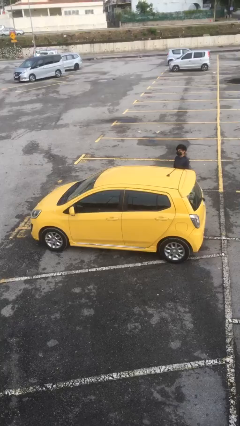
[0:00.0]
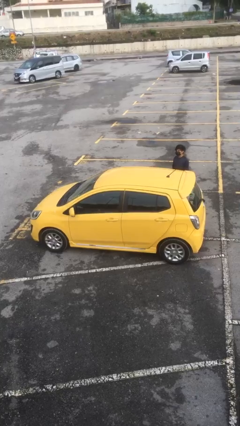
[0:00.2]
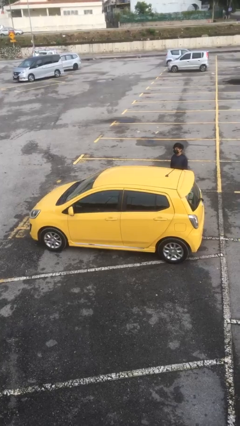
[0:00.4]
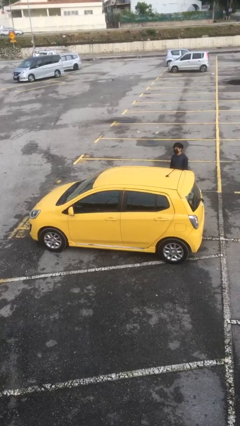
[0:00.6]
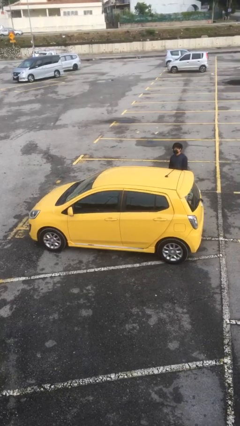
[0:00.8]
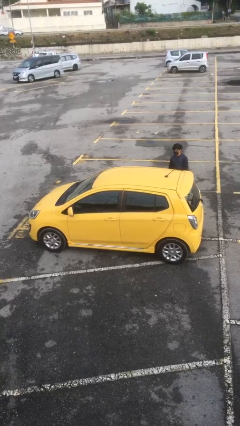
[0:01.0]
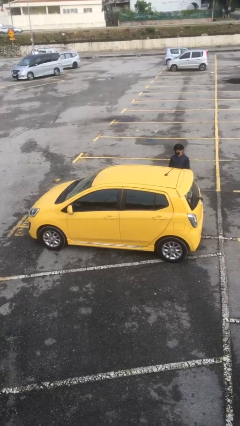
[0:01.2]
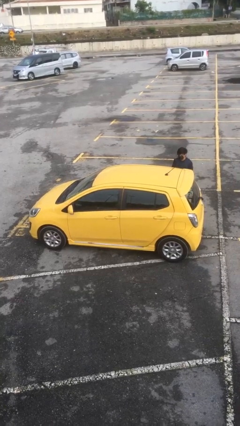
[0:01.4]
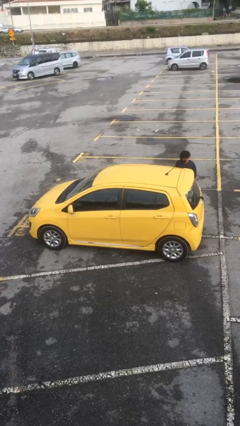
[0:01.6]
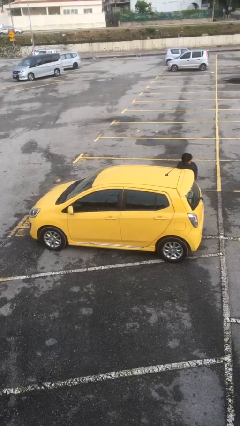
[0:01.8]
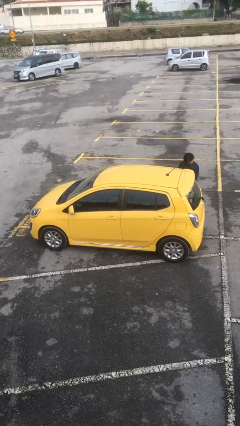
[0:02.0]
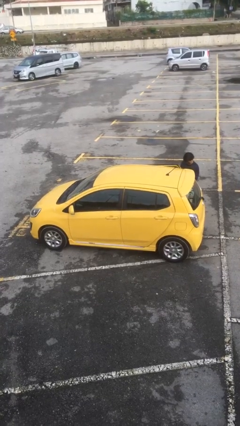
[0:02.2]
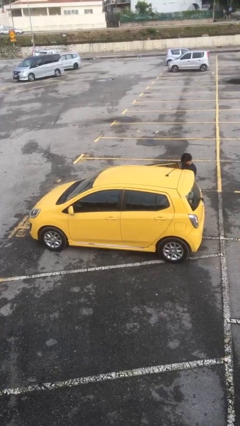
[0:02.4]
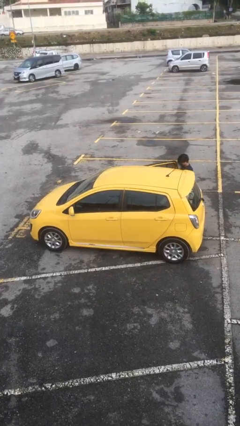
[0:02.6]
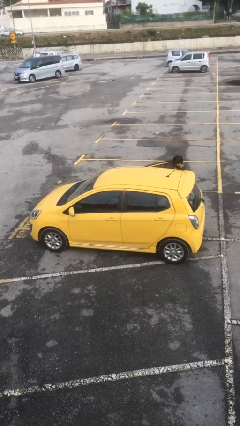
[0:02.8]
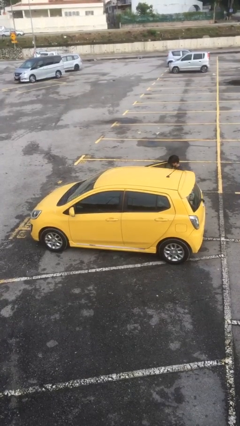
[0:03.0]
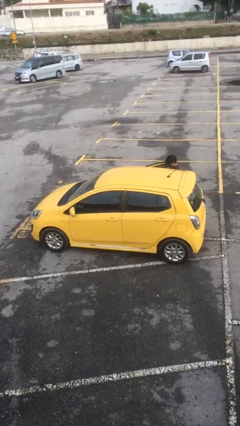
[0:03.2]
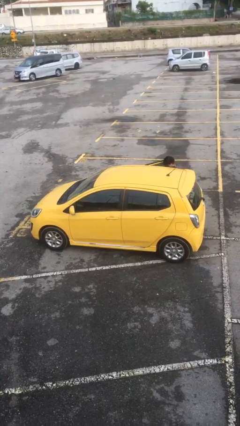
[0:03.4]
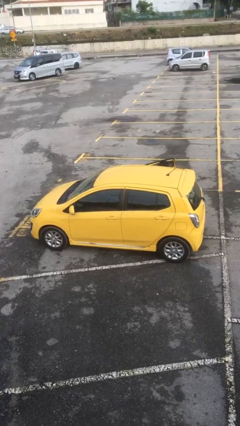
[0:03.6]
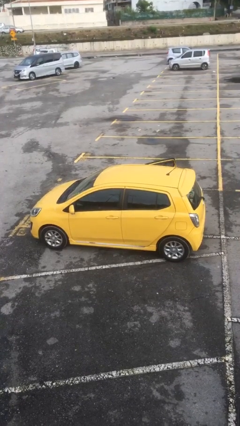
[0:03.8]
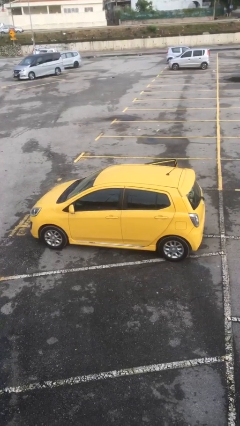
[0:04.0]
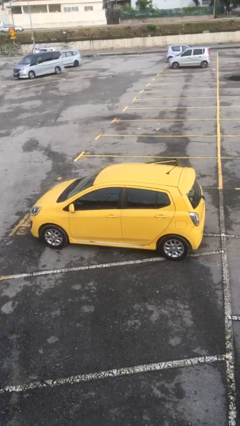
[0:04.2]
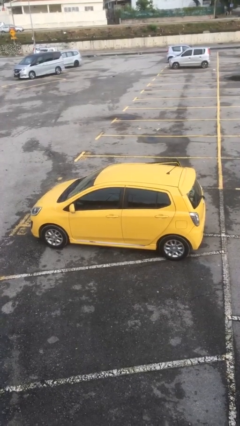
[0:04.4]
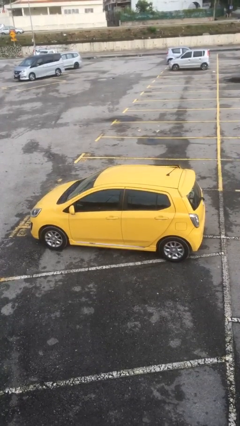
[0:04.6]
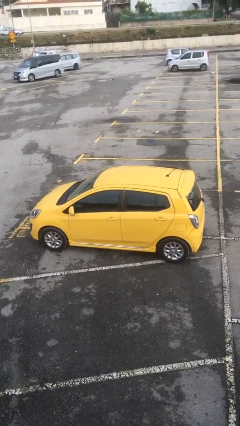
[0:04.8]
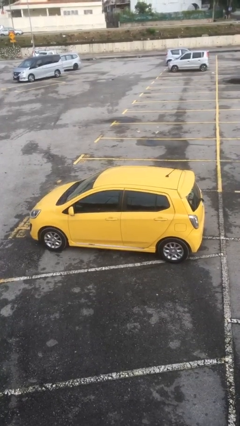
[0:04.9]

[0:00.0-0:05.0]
car picks up person

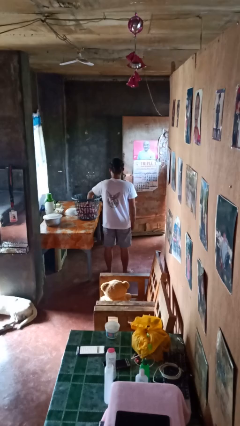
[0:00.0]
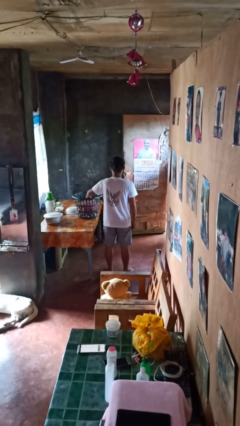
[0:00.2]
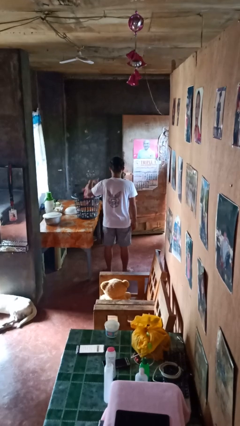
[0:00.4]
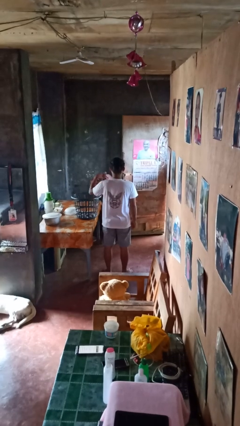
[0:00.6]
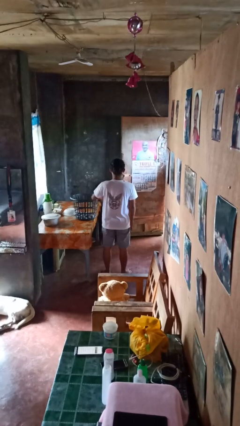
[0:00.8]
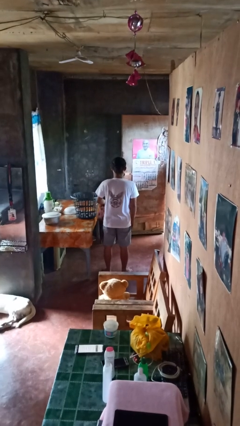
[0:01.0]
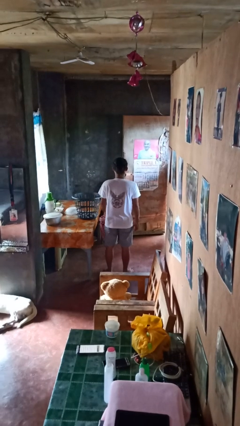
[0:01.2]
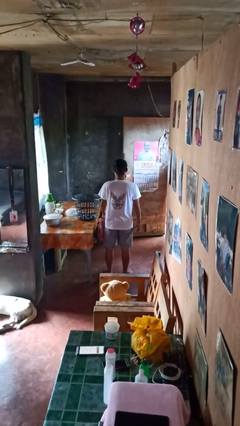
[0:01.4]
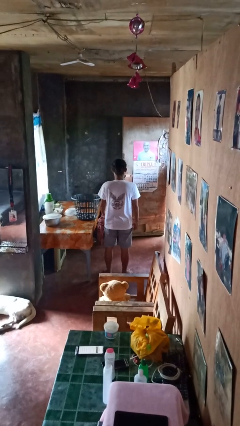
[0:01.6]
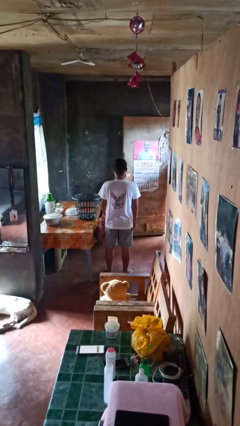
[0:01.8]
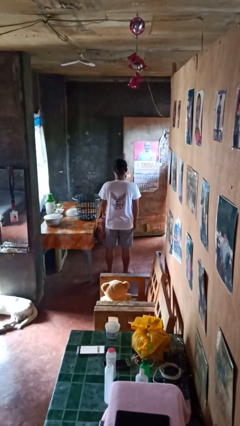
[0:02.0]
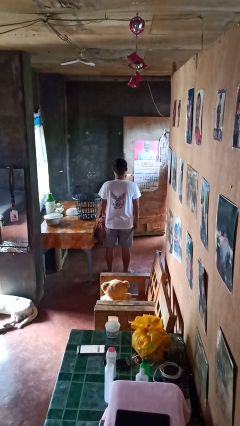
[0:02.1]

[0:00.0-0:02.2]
person takes object from basket

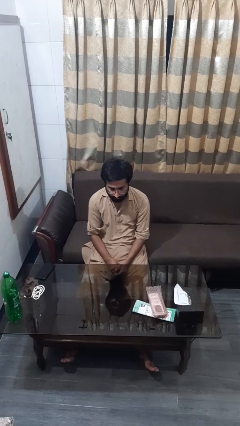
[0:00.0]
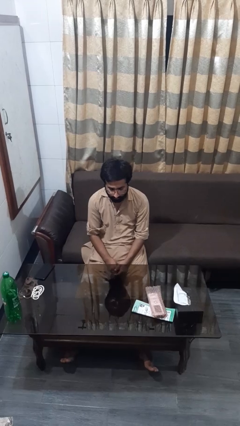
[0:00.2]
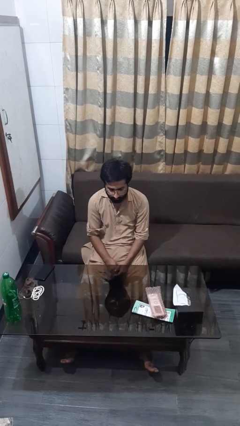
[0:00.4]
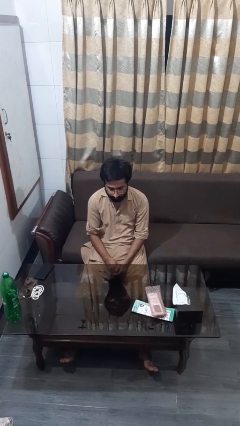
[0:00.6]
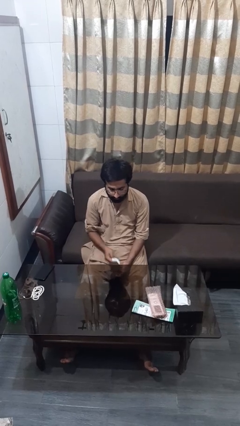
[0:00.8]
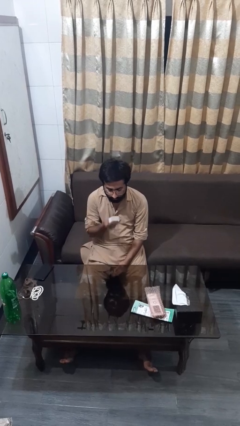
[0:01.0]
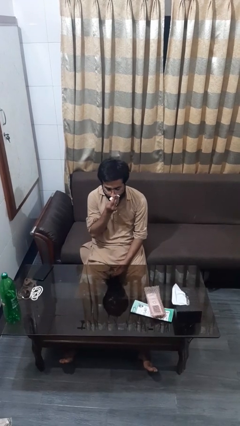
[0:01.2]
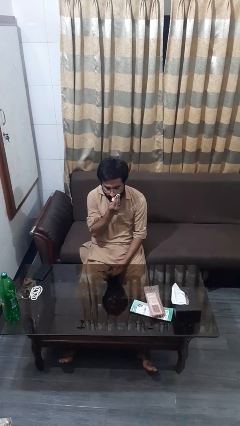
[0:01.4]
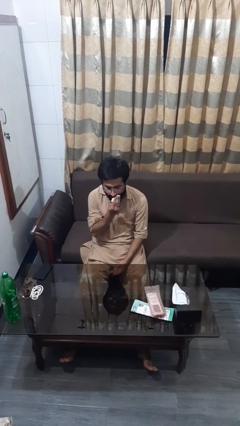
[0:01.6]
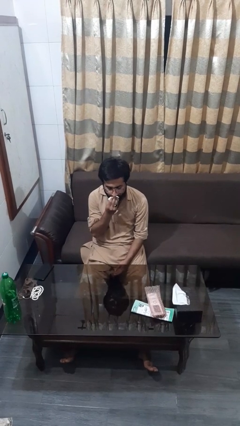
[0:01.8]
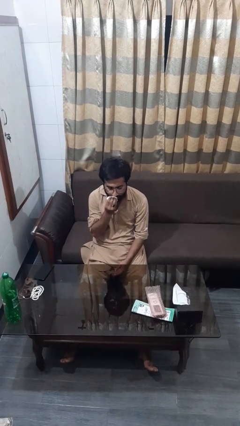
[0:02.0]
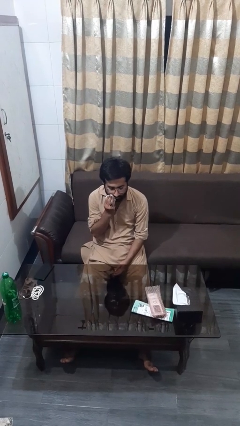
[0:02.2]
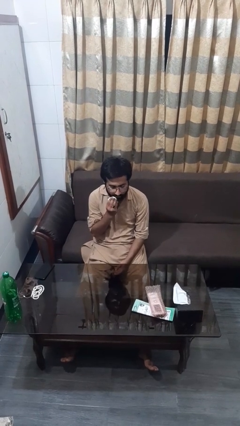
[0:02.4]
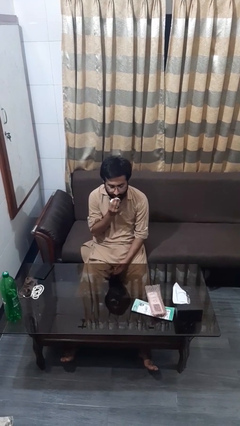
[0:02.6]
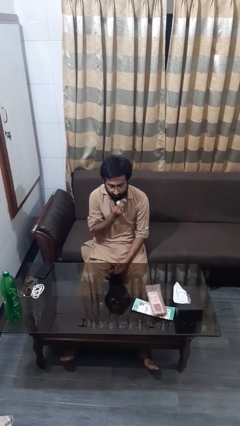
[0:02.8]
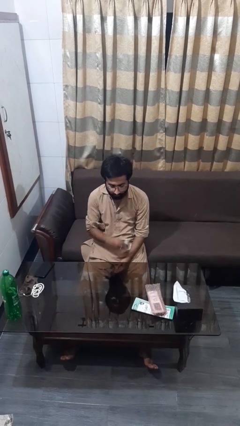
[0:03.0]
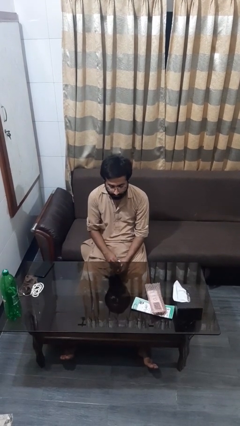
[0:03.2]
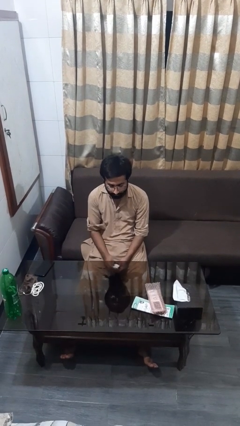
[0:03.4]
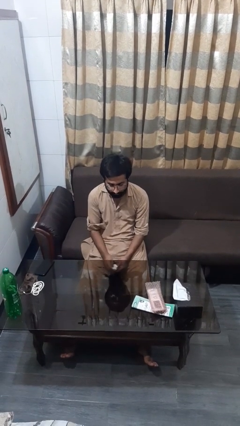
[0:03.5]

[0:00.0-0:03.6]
person wipes mouth with napkin

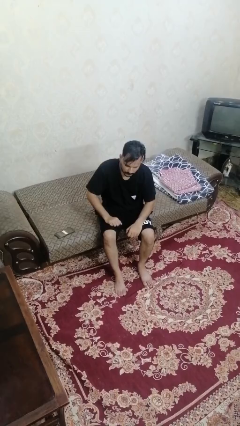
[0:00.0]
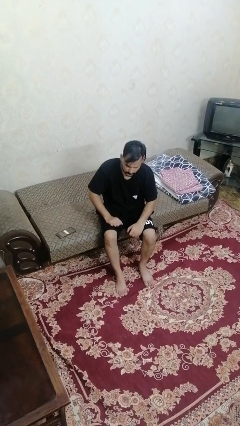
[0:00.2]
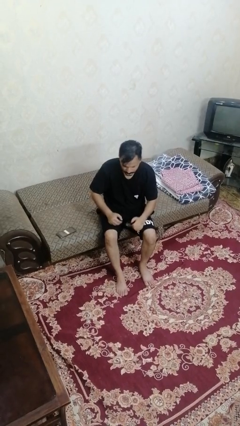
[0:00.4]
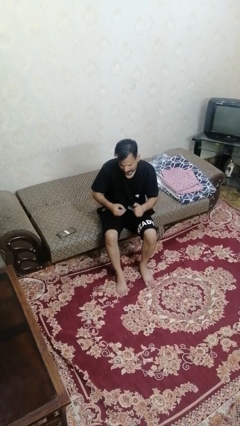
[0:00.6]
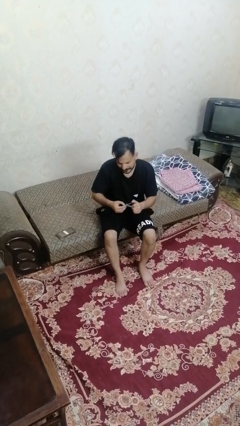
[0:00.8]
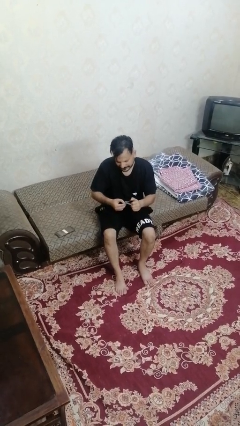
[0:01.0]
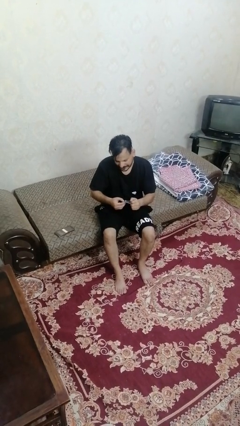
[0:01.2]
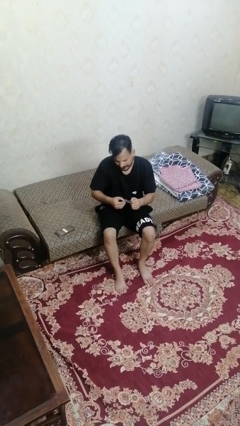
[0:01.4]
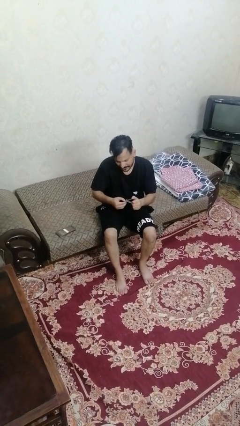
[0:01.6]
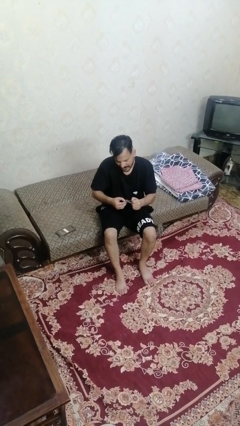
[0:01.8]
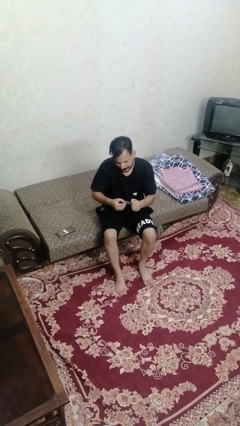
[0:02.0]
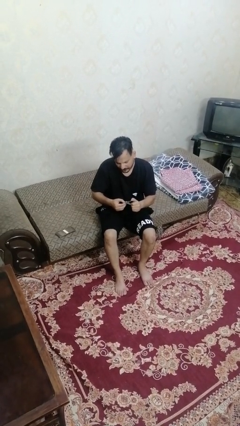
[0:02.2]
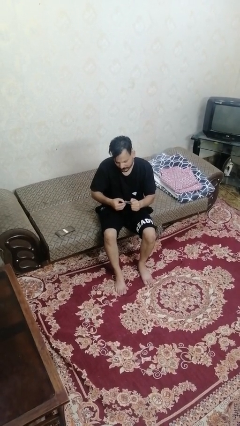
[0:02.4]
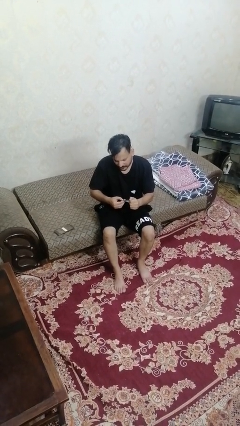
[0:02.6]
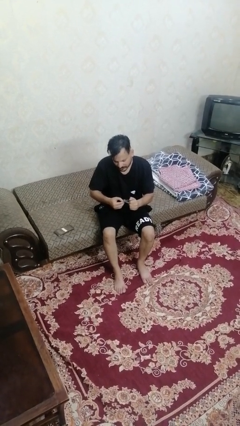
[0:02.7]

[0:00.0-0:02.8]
person clips fingernails

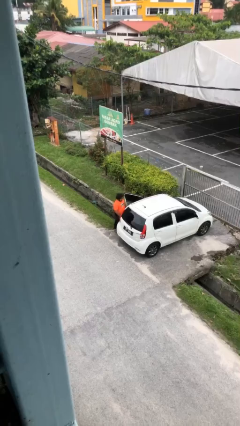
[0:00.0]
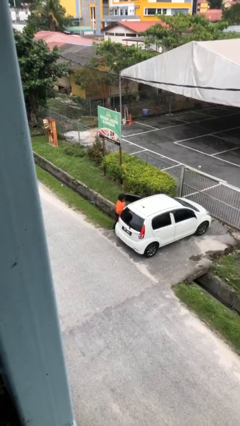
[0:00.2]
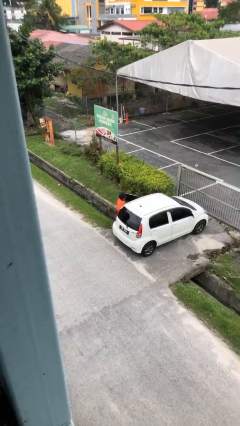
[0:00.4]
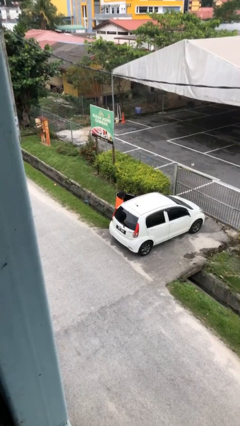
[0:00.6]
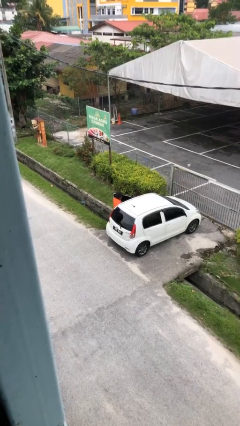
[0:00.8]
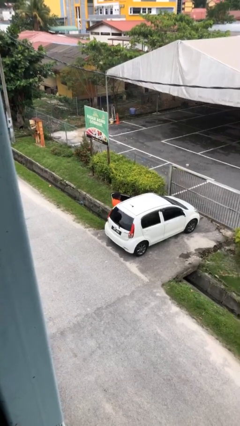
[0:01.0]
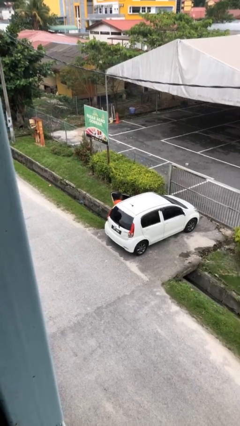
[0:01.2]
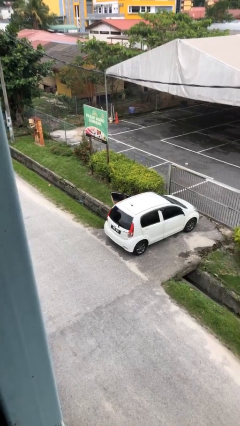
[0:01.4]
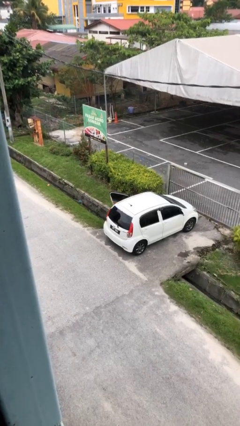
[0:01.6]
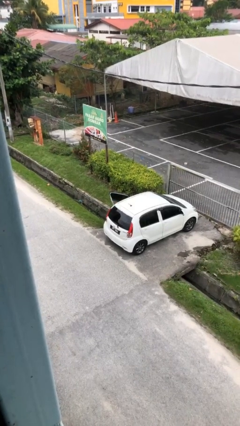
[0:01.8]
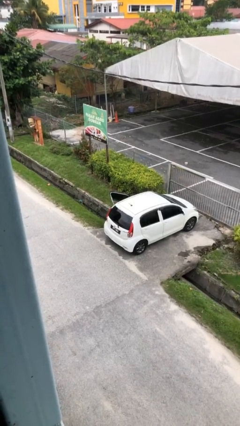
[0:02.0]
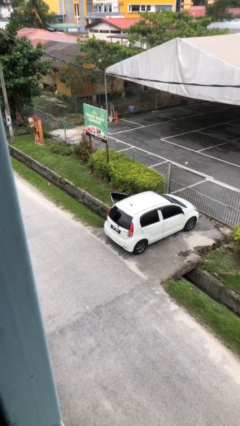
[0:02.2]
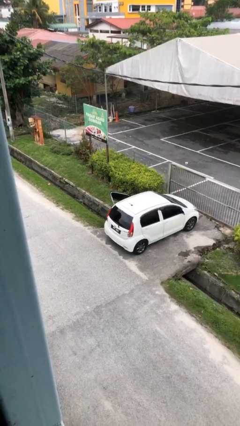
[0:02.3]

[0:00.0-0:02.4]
person enters car

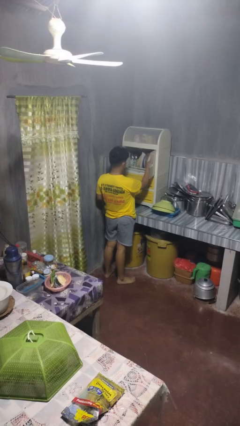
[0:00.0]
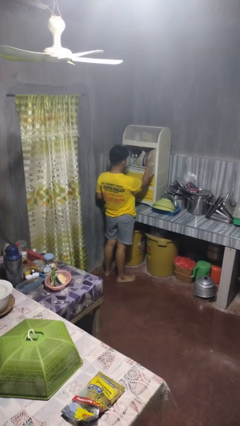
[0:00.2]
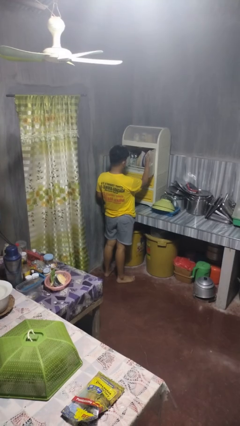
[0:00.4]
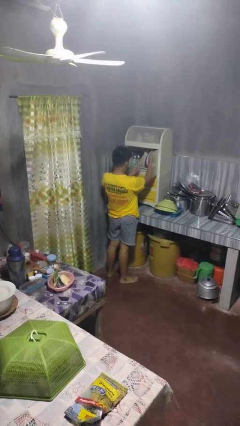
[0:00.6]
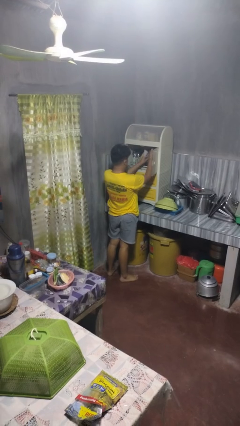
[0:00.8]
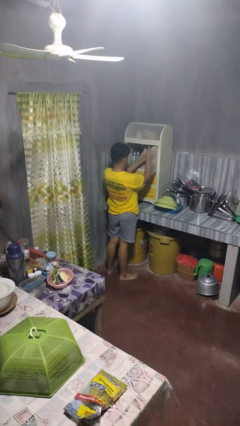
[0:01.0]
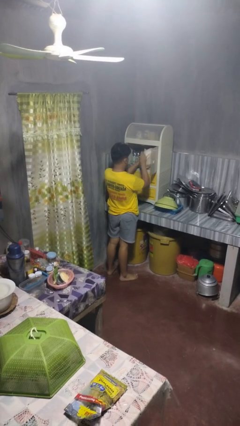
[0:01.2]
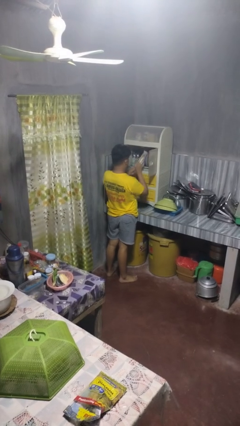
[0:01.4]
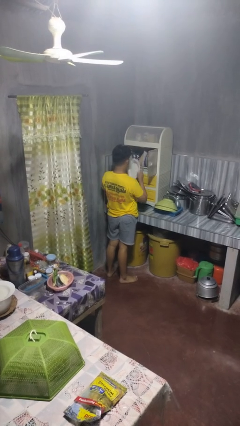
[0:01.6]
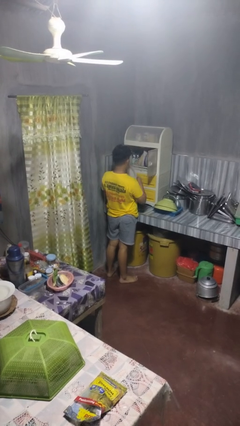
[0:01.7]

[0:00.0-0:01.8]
person takes object from cabinet
